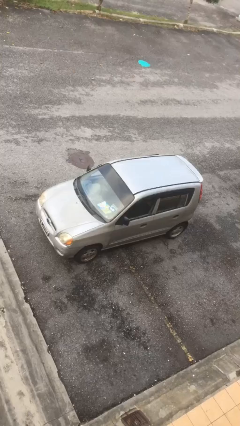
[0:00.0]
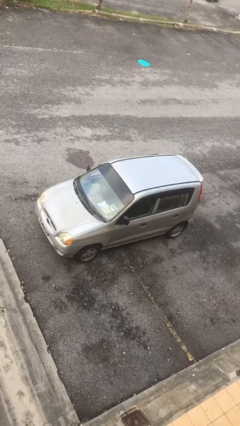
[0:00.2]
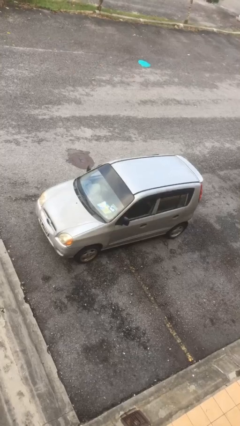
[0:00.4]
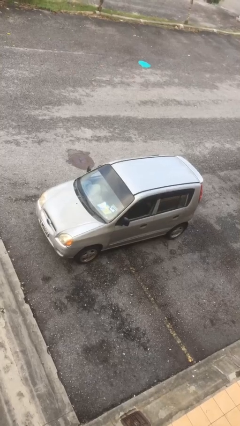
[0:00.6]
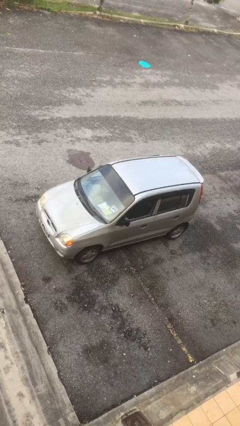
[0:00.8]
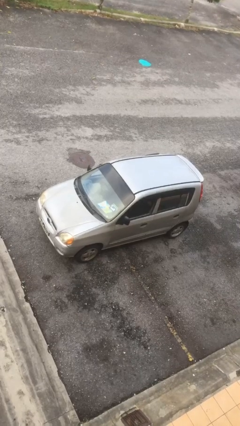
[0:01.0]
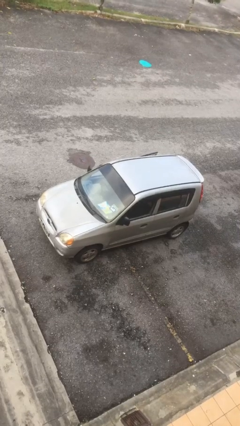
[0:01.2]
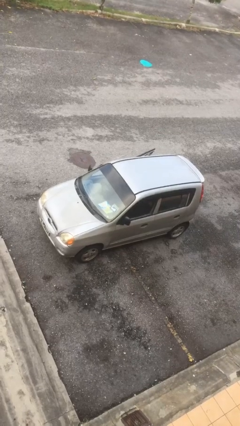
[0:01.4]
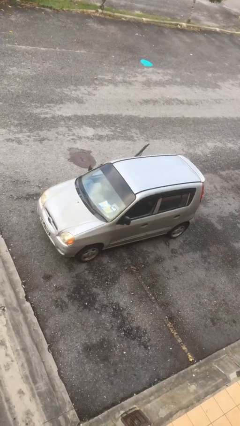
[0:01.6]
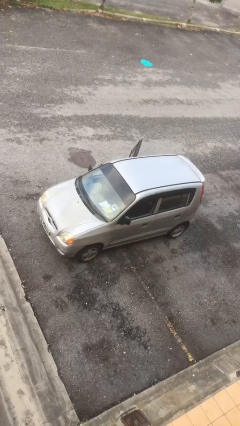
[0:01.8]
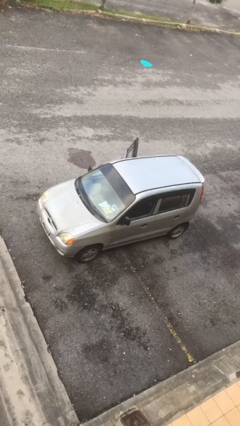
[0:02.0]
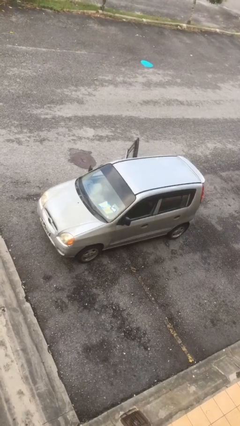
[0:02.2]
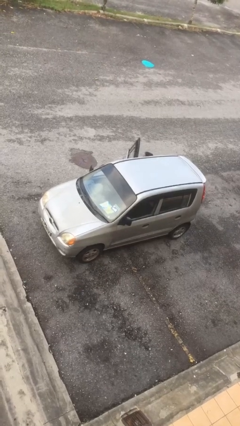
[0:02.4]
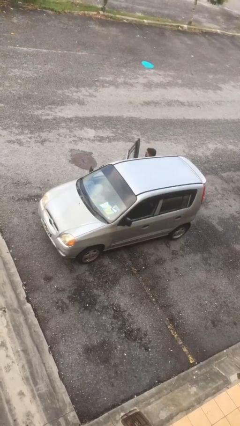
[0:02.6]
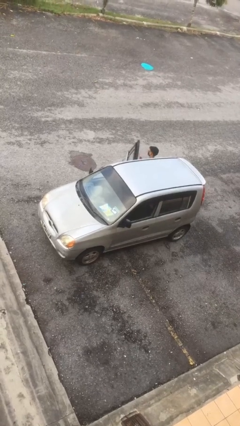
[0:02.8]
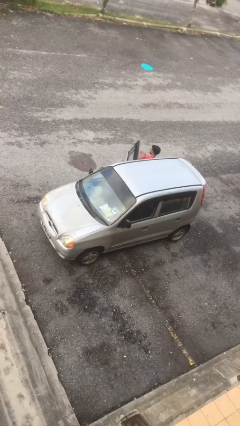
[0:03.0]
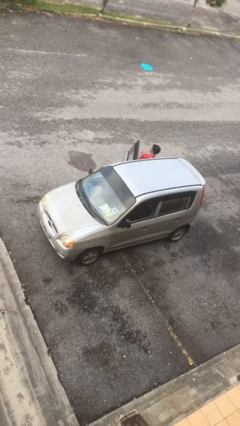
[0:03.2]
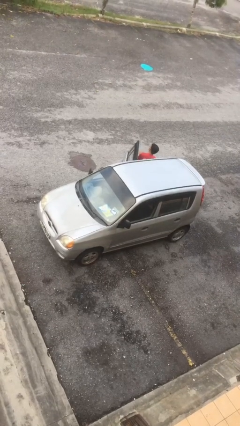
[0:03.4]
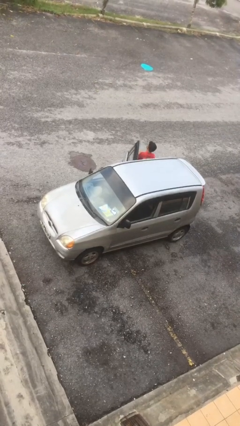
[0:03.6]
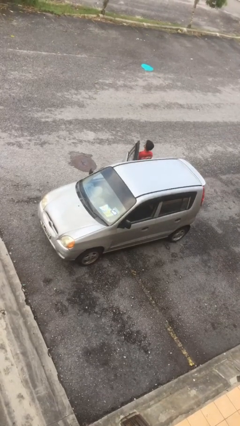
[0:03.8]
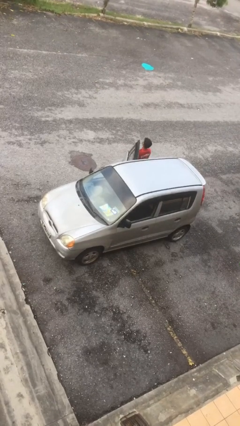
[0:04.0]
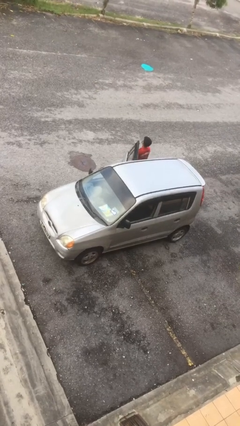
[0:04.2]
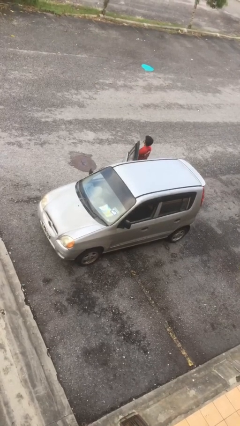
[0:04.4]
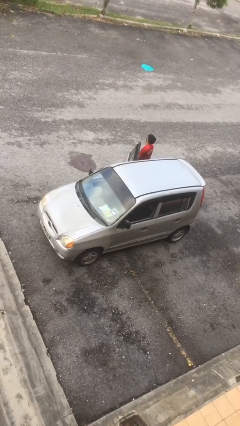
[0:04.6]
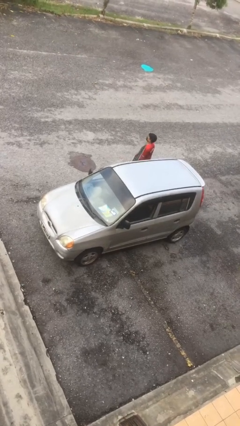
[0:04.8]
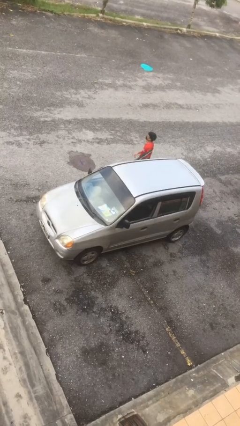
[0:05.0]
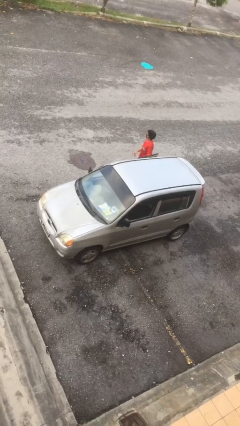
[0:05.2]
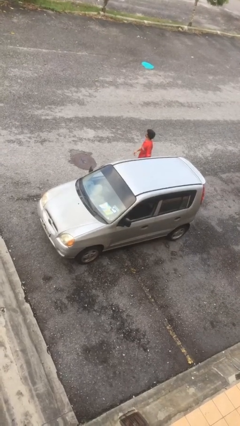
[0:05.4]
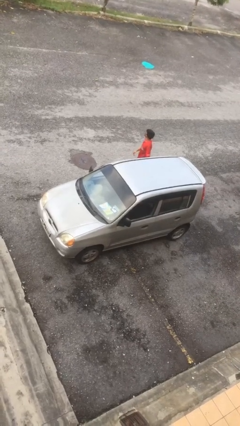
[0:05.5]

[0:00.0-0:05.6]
car drops off person

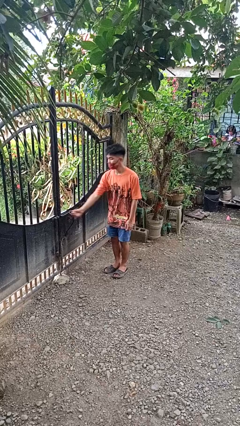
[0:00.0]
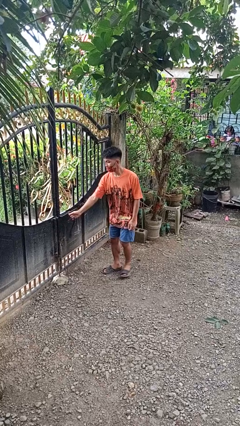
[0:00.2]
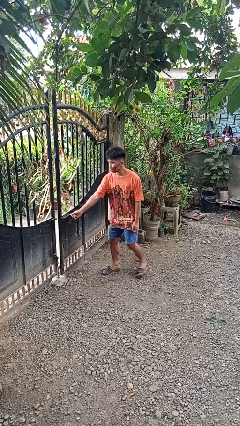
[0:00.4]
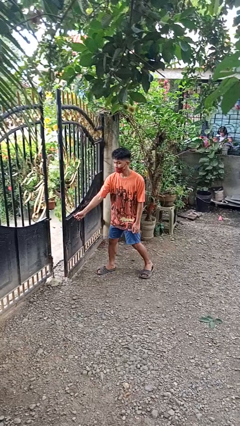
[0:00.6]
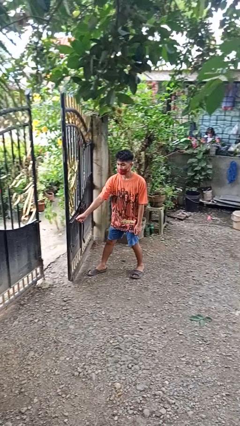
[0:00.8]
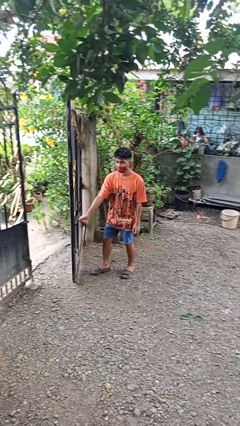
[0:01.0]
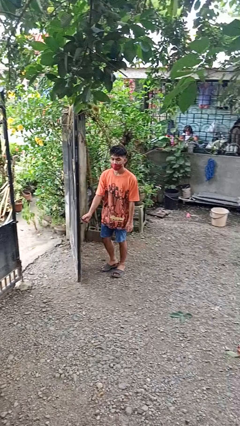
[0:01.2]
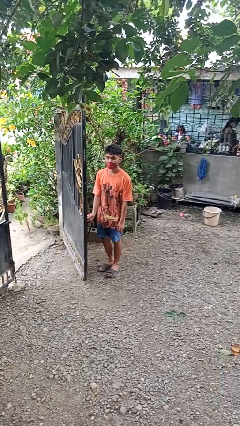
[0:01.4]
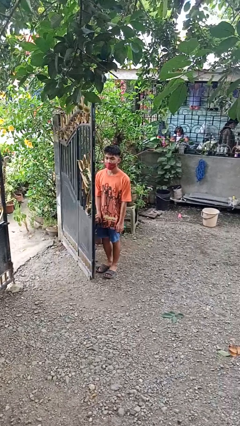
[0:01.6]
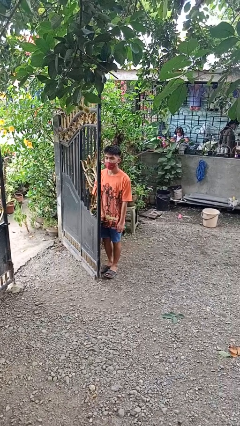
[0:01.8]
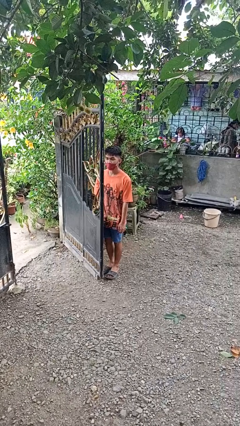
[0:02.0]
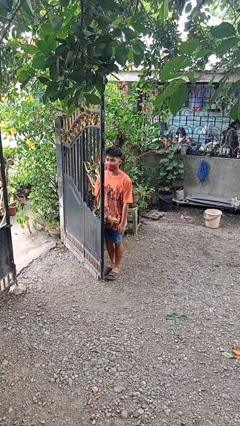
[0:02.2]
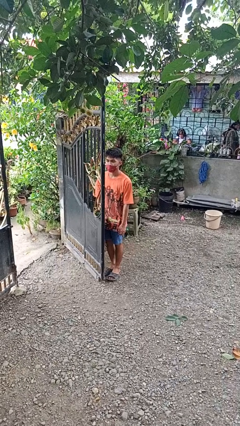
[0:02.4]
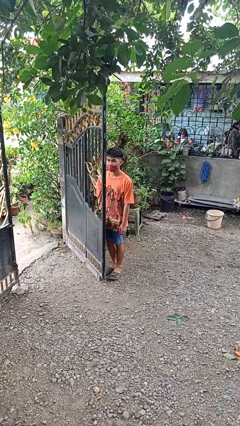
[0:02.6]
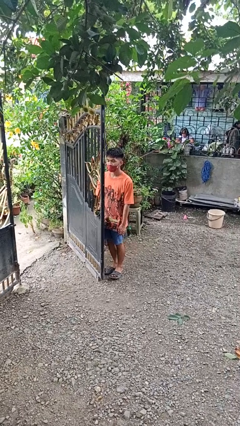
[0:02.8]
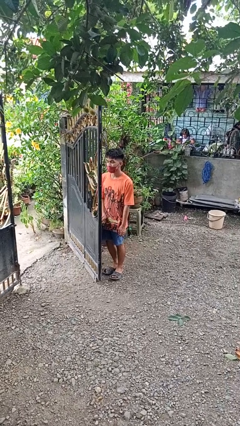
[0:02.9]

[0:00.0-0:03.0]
person opens gate

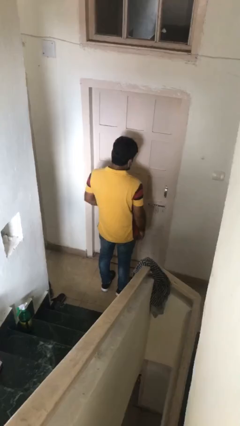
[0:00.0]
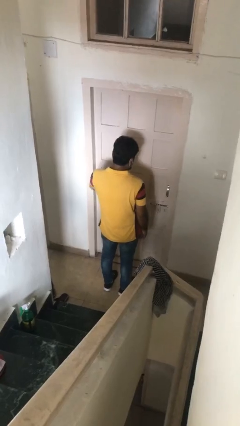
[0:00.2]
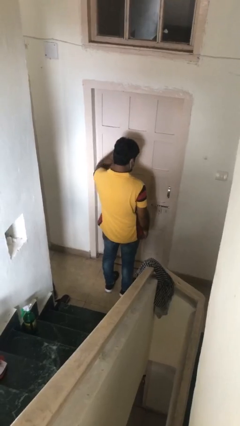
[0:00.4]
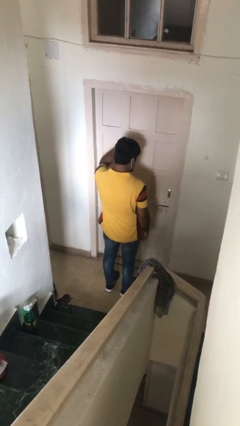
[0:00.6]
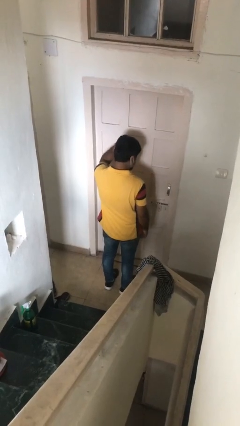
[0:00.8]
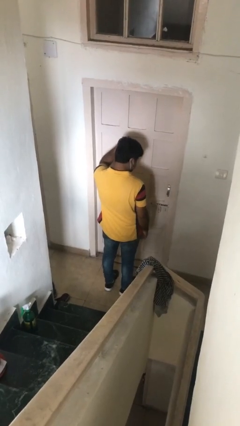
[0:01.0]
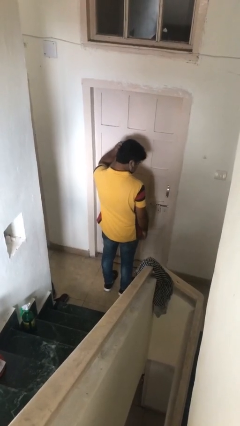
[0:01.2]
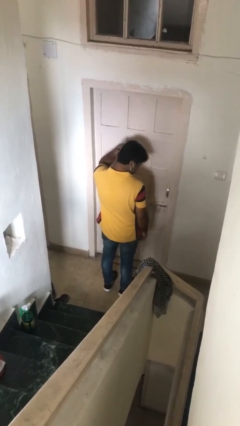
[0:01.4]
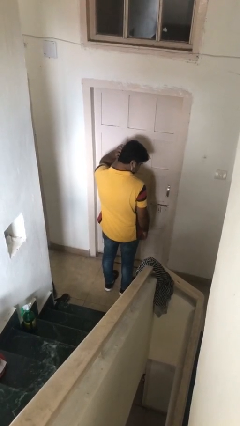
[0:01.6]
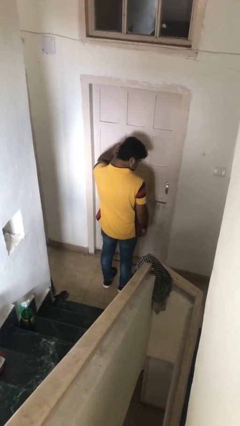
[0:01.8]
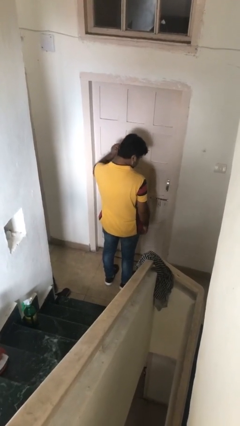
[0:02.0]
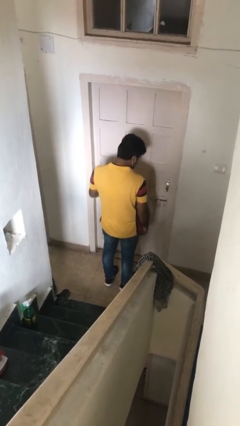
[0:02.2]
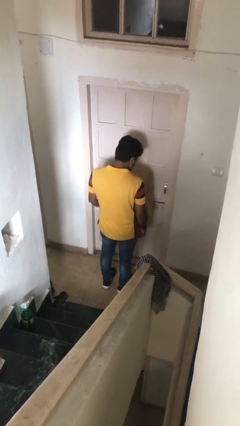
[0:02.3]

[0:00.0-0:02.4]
person scratches face

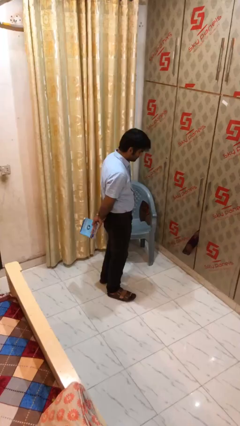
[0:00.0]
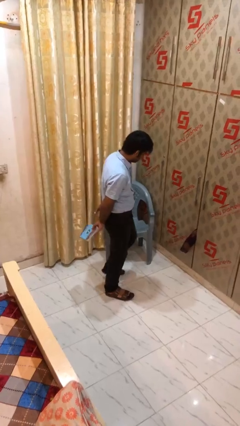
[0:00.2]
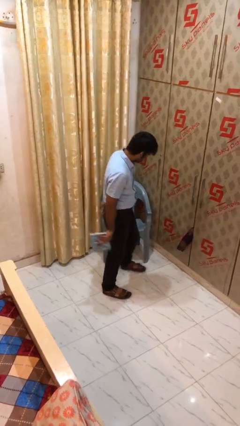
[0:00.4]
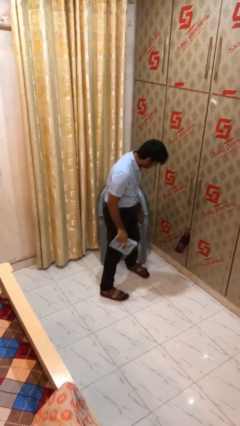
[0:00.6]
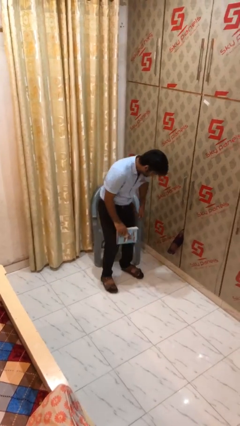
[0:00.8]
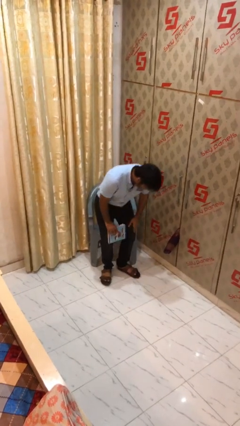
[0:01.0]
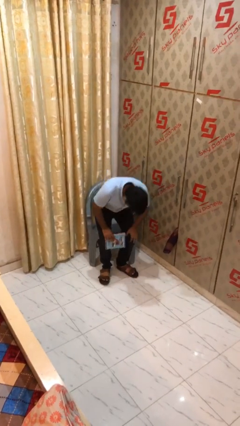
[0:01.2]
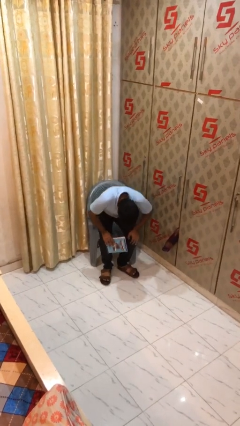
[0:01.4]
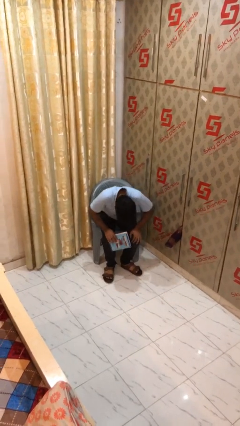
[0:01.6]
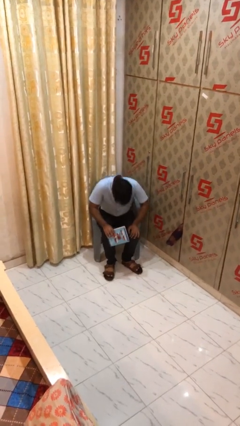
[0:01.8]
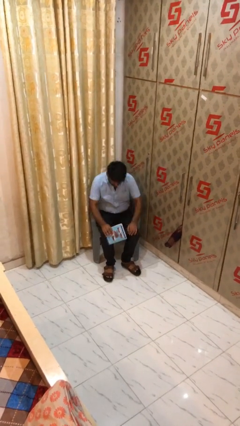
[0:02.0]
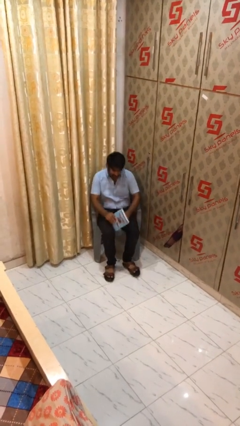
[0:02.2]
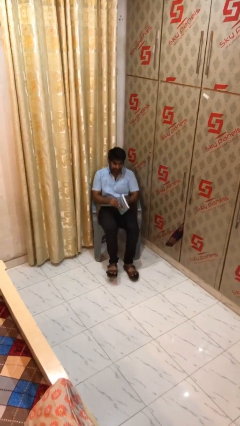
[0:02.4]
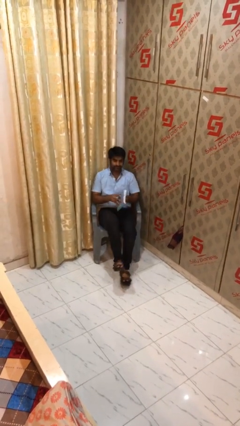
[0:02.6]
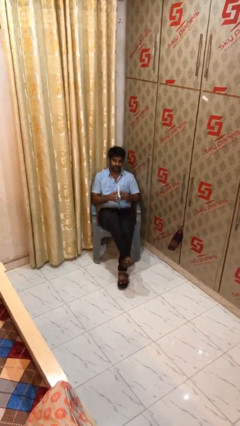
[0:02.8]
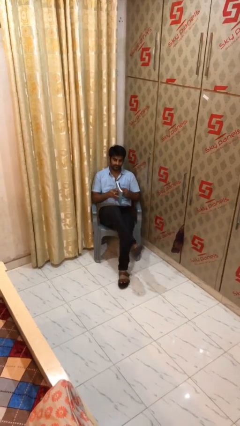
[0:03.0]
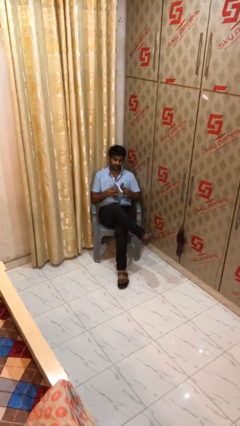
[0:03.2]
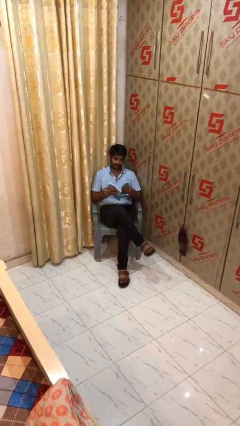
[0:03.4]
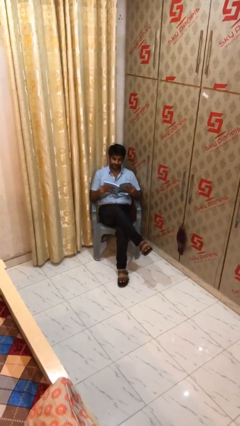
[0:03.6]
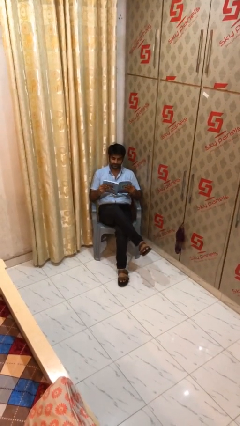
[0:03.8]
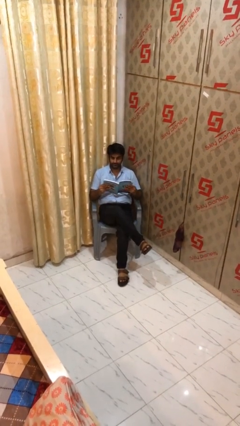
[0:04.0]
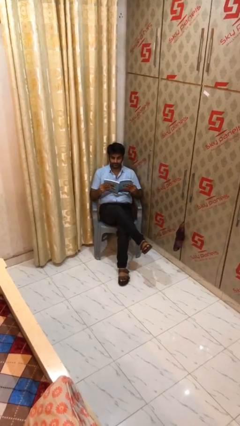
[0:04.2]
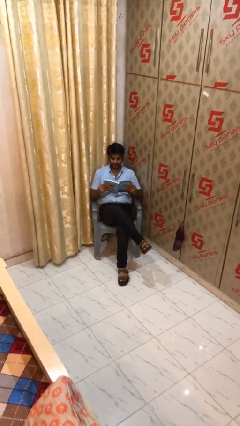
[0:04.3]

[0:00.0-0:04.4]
person sits down

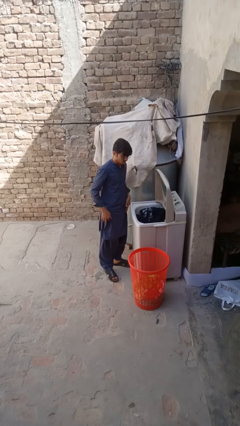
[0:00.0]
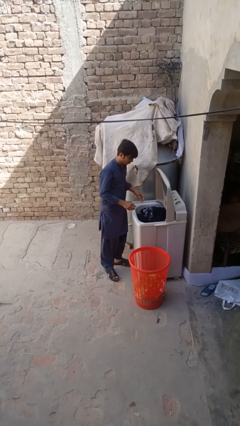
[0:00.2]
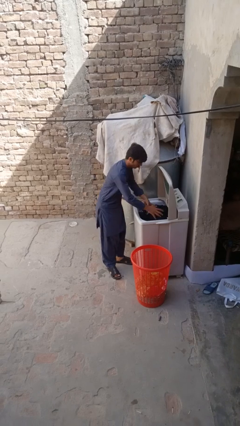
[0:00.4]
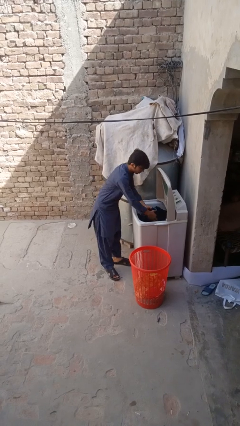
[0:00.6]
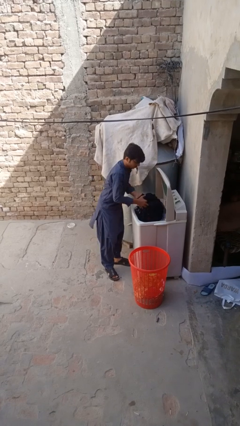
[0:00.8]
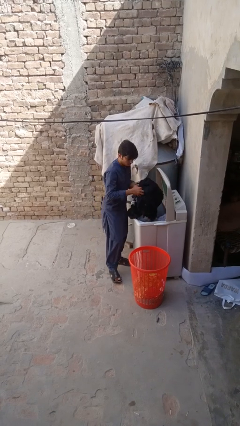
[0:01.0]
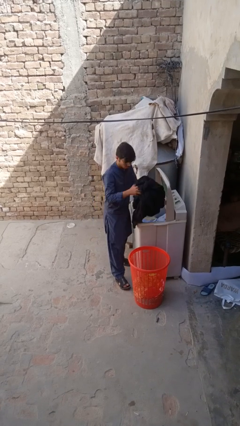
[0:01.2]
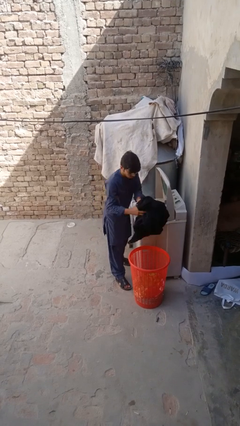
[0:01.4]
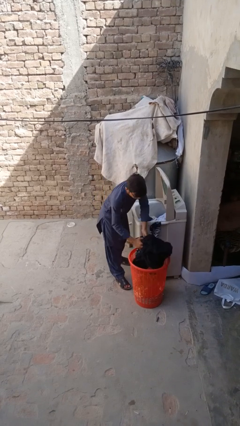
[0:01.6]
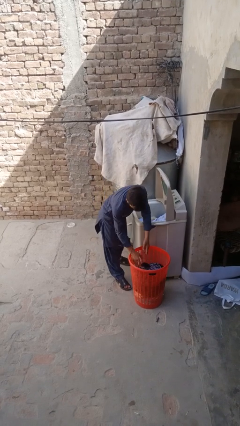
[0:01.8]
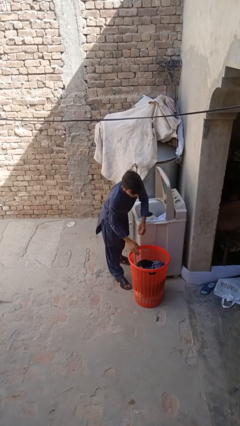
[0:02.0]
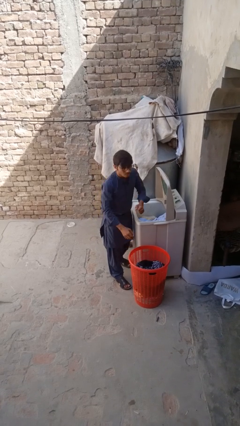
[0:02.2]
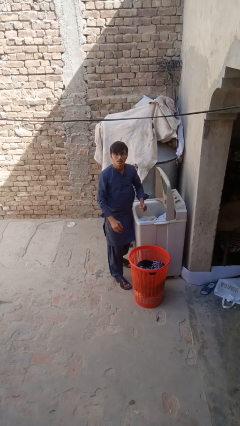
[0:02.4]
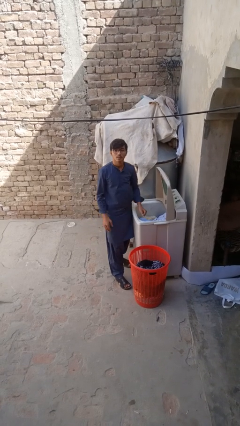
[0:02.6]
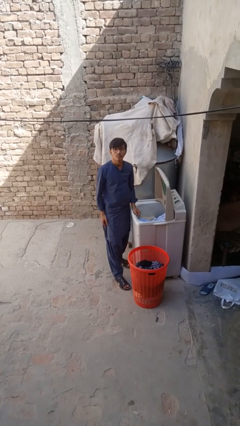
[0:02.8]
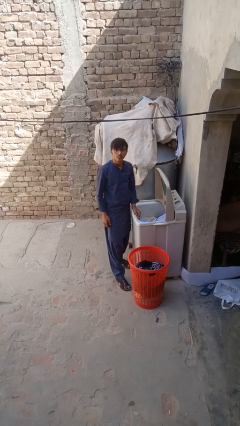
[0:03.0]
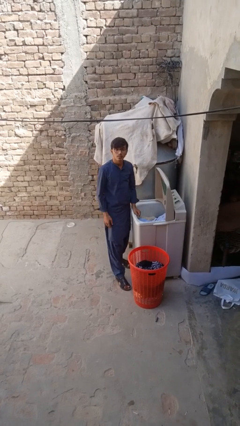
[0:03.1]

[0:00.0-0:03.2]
person unloads clotheswasher
